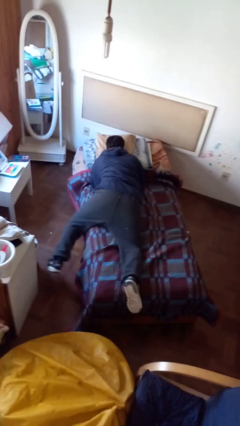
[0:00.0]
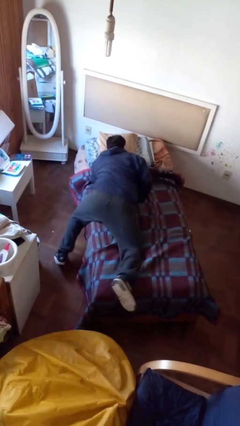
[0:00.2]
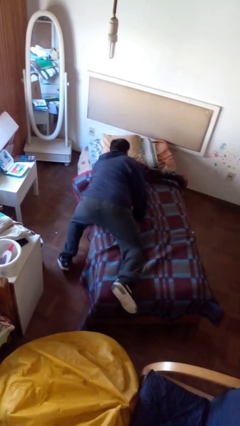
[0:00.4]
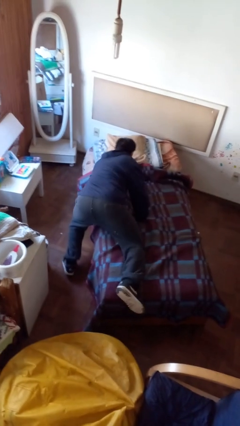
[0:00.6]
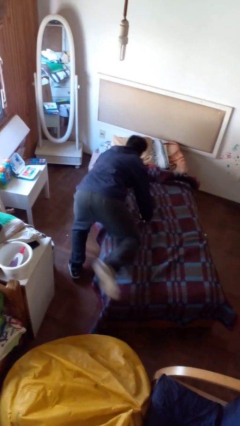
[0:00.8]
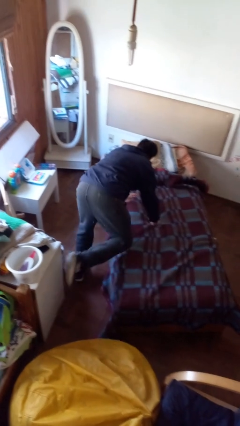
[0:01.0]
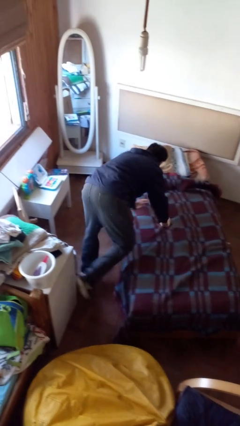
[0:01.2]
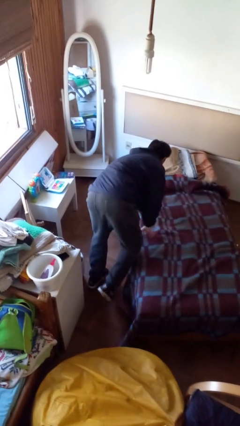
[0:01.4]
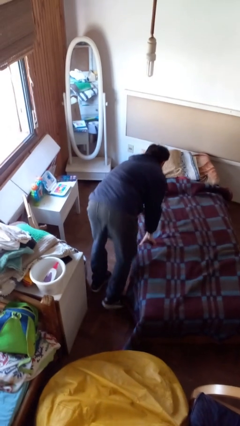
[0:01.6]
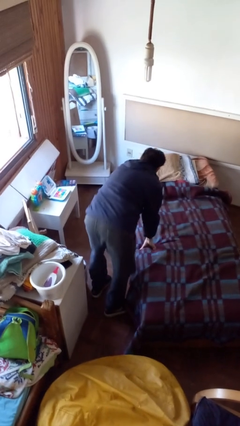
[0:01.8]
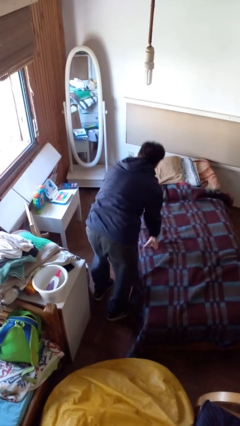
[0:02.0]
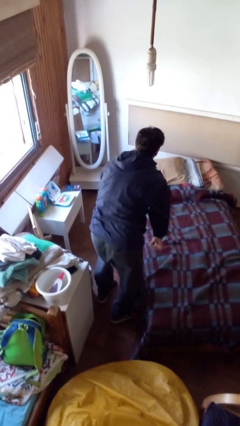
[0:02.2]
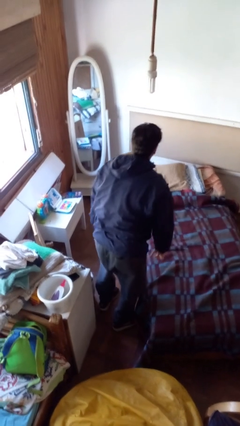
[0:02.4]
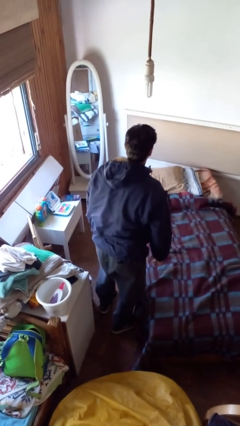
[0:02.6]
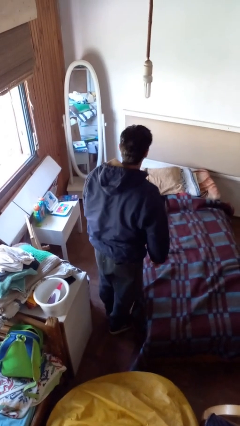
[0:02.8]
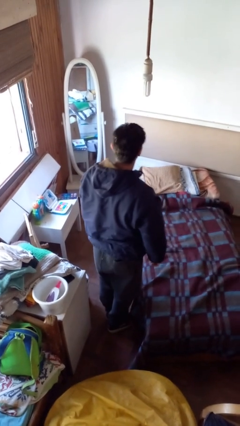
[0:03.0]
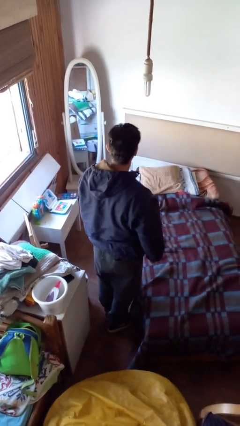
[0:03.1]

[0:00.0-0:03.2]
person stands up

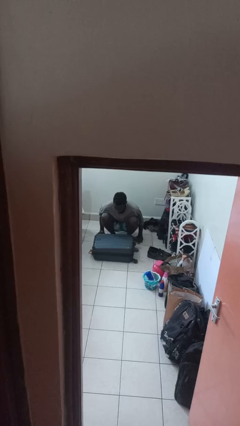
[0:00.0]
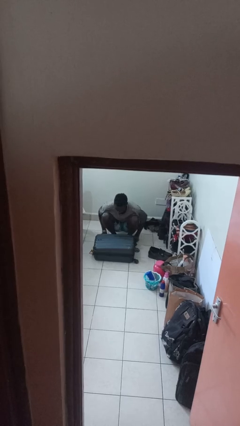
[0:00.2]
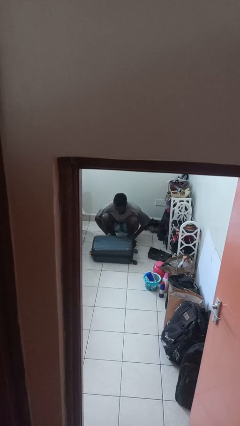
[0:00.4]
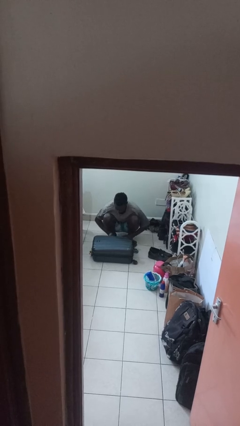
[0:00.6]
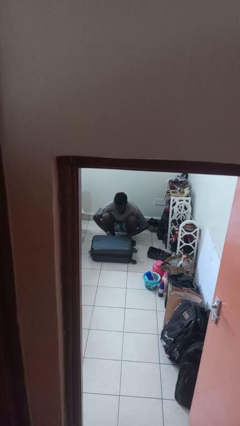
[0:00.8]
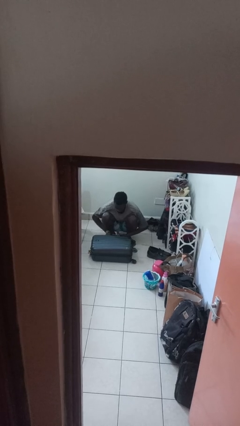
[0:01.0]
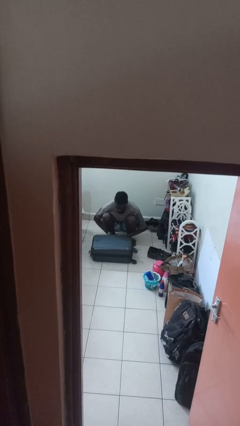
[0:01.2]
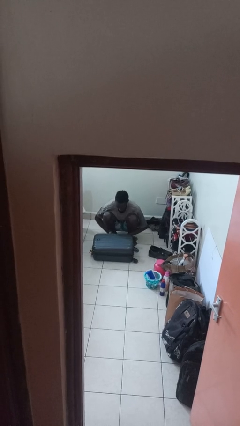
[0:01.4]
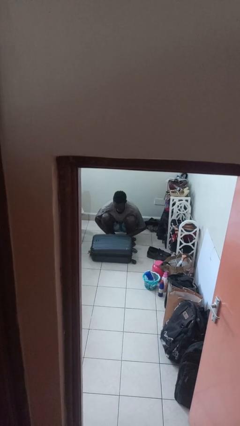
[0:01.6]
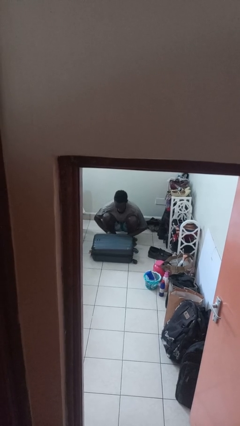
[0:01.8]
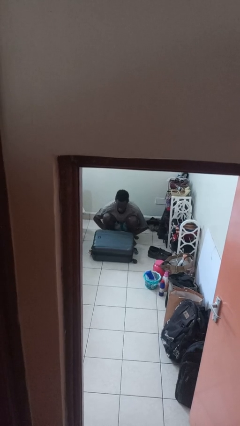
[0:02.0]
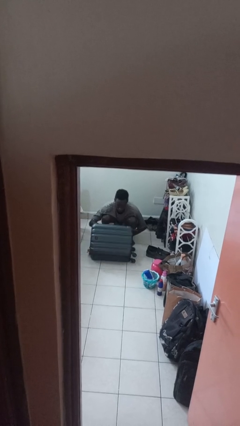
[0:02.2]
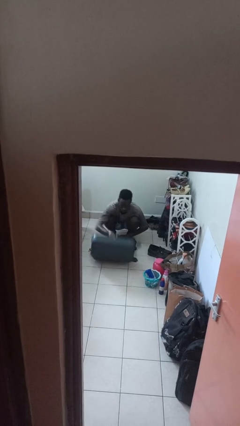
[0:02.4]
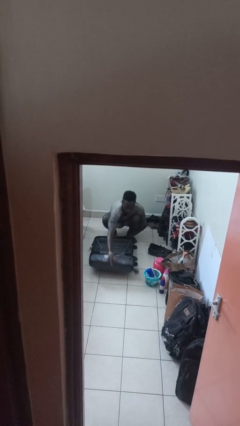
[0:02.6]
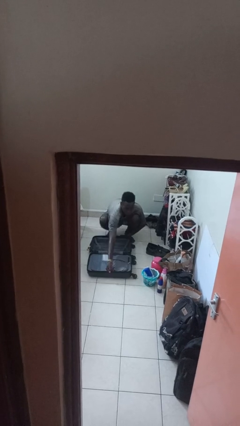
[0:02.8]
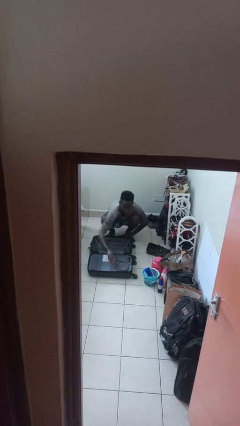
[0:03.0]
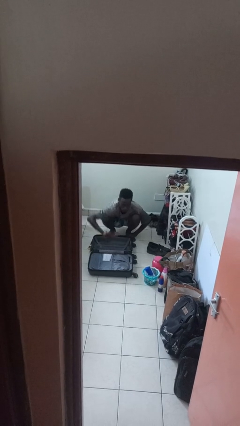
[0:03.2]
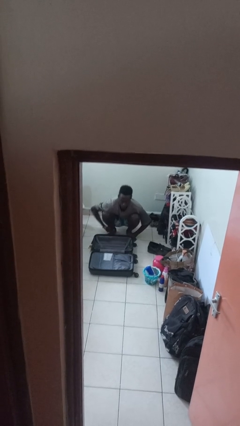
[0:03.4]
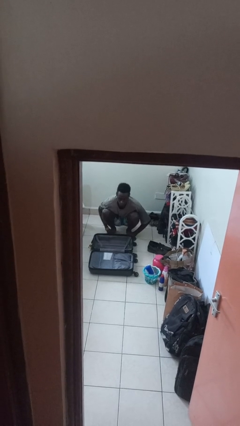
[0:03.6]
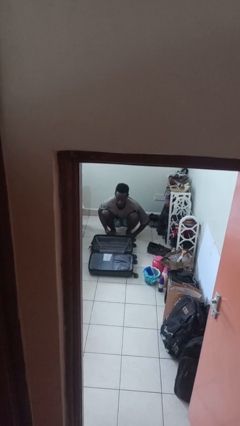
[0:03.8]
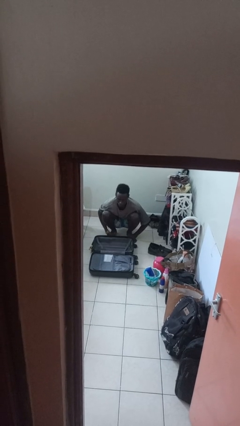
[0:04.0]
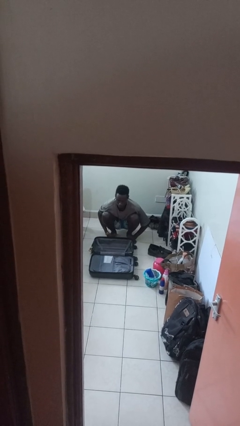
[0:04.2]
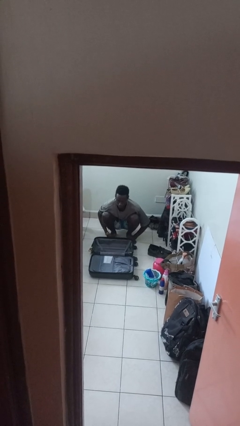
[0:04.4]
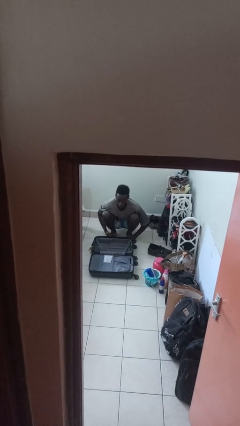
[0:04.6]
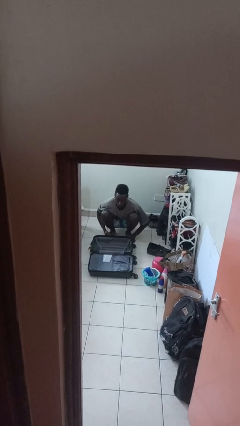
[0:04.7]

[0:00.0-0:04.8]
person opens suitcase

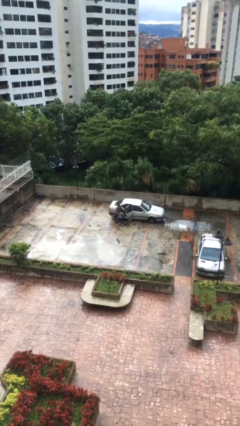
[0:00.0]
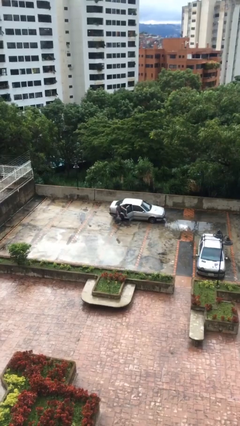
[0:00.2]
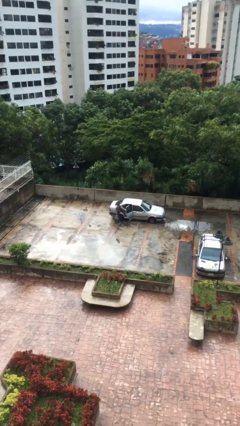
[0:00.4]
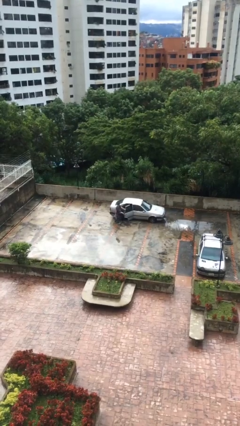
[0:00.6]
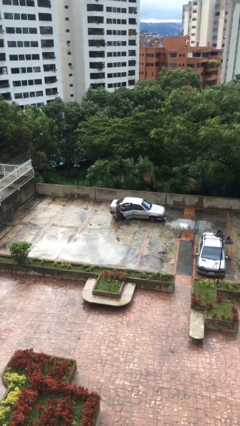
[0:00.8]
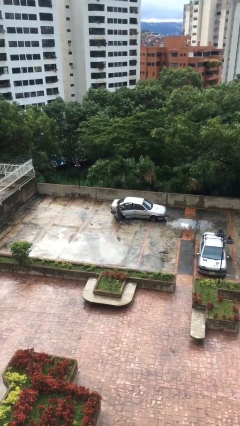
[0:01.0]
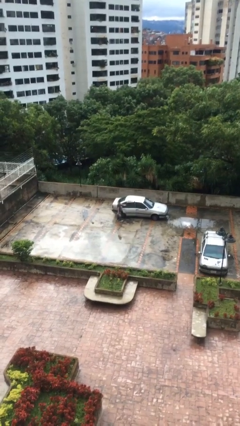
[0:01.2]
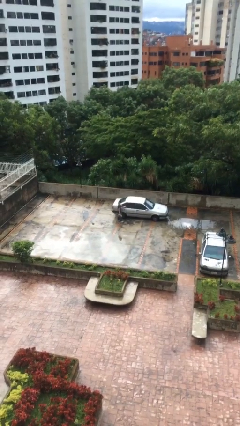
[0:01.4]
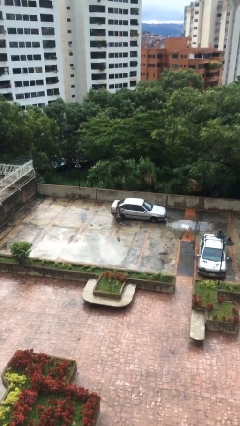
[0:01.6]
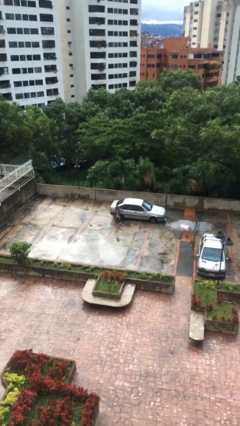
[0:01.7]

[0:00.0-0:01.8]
person closes car door

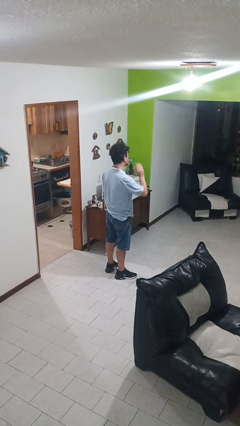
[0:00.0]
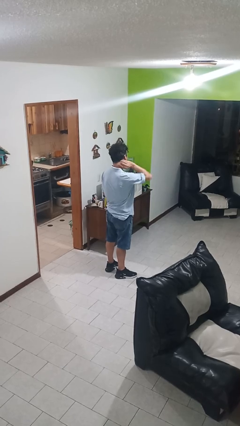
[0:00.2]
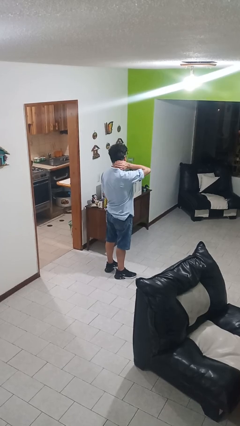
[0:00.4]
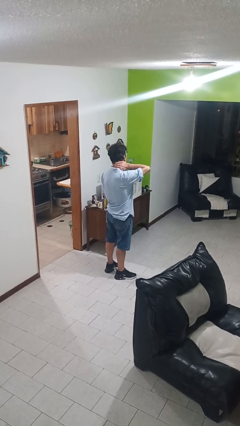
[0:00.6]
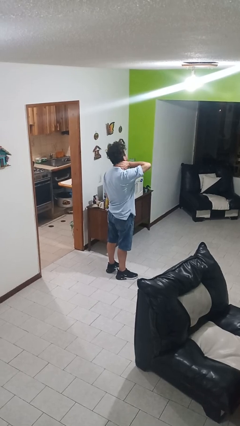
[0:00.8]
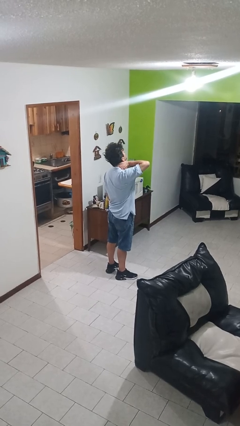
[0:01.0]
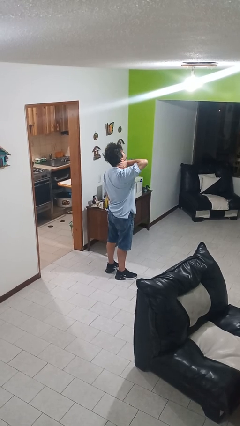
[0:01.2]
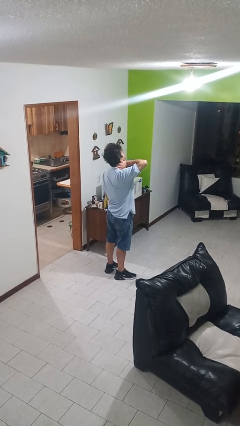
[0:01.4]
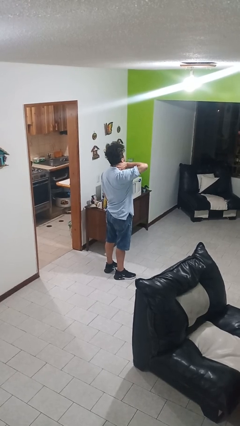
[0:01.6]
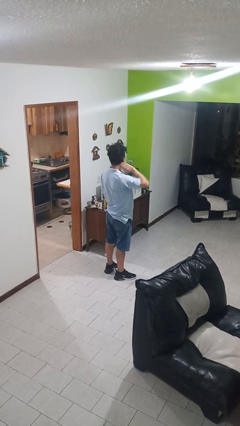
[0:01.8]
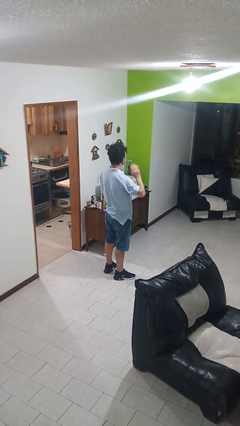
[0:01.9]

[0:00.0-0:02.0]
person rubs neck

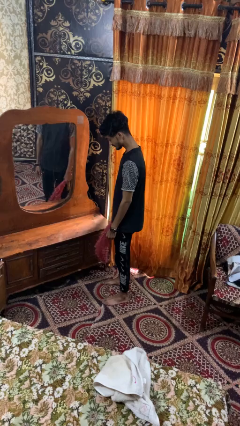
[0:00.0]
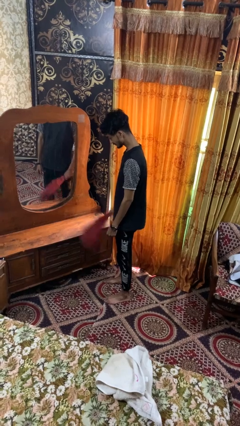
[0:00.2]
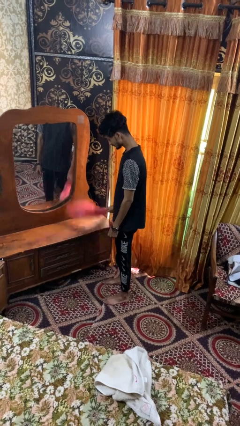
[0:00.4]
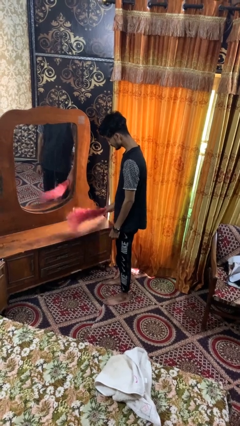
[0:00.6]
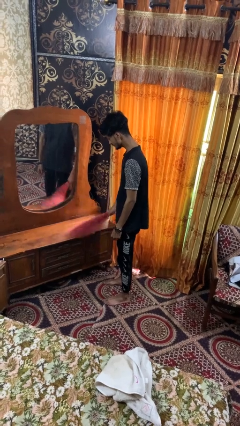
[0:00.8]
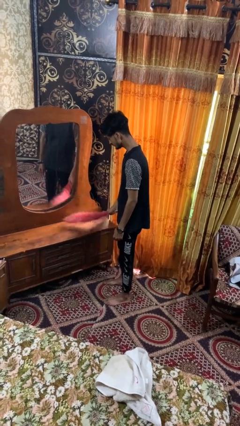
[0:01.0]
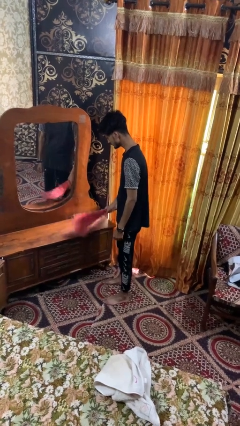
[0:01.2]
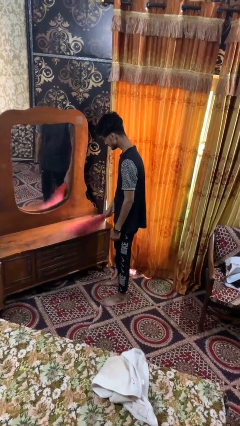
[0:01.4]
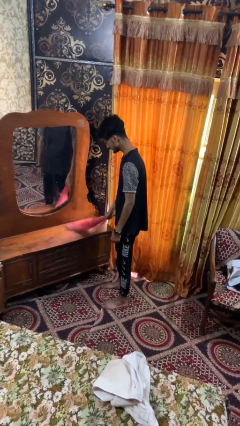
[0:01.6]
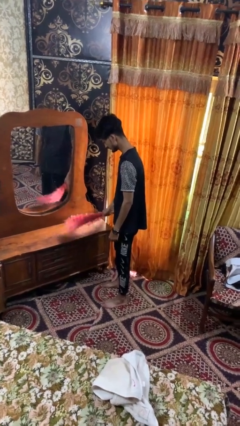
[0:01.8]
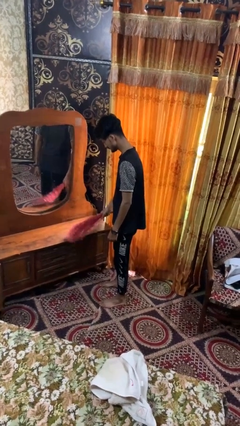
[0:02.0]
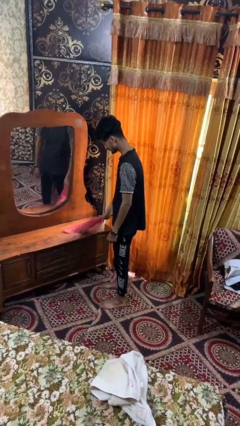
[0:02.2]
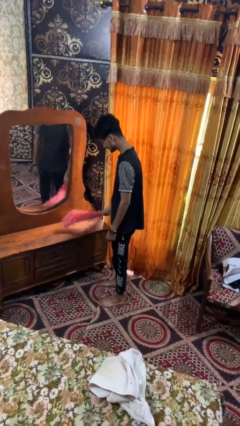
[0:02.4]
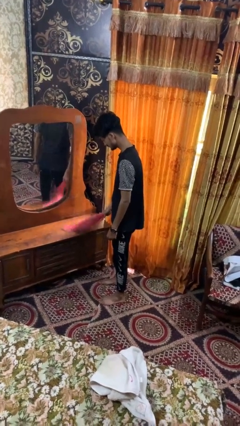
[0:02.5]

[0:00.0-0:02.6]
person dusts furniture

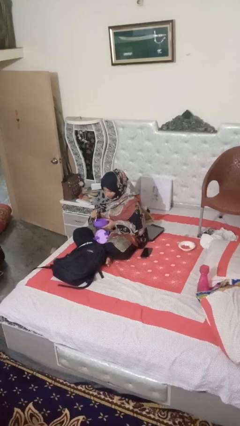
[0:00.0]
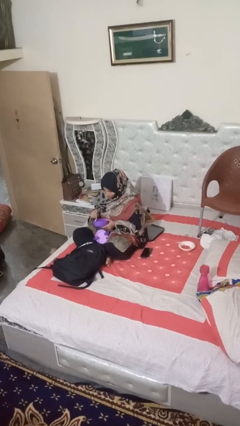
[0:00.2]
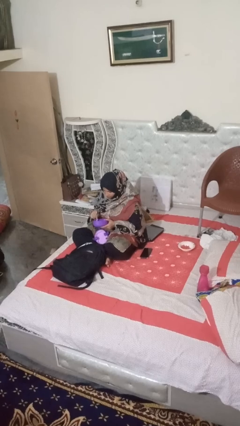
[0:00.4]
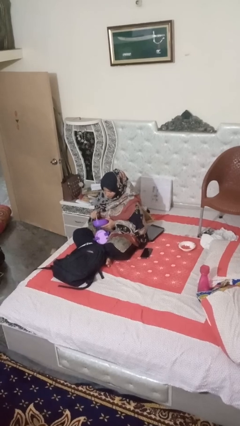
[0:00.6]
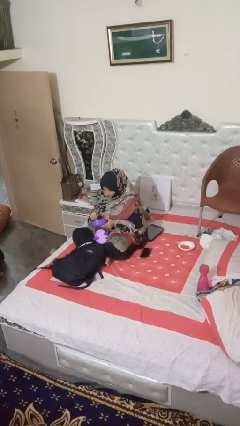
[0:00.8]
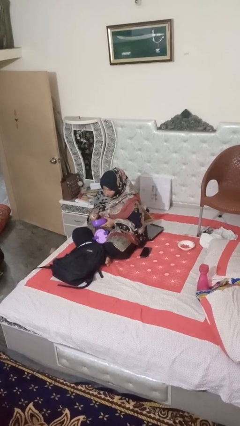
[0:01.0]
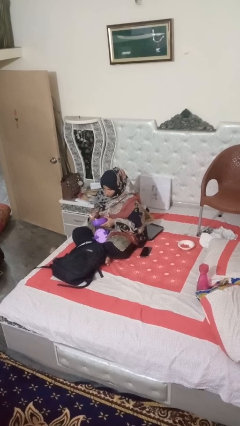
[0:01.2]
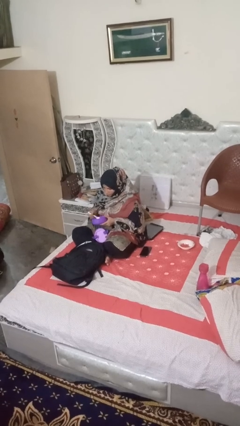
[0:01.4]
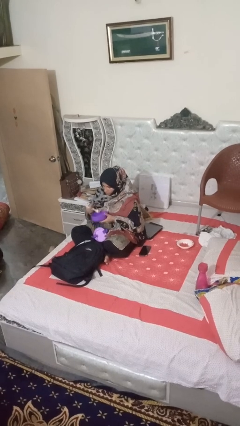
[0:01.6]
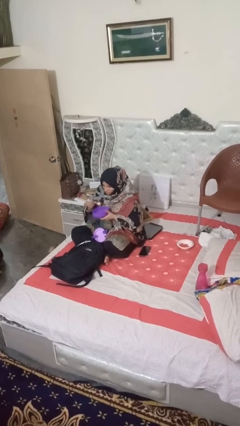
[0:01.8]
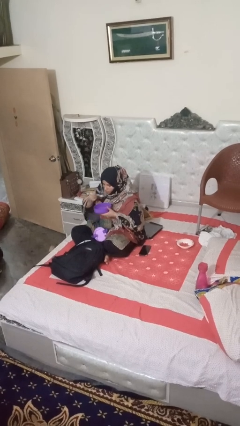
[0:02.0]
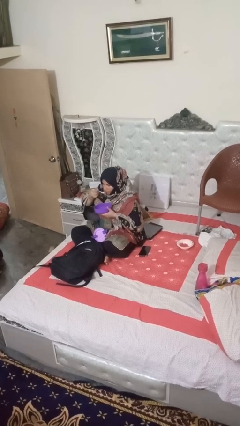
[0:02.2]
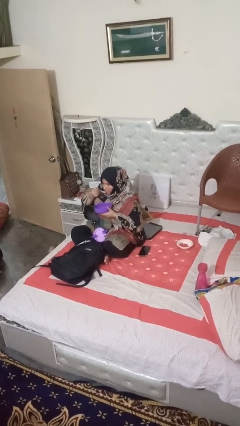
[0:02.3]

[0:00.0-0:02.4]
person eats snack from bag

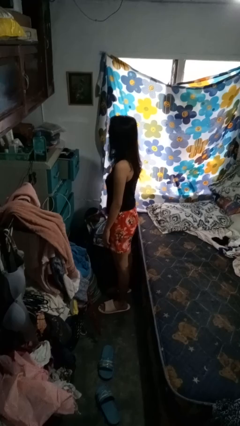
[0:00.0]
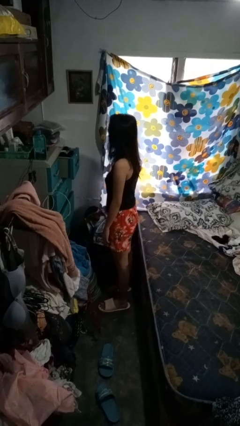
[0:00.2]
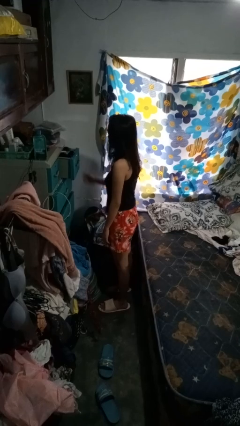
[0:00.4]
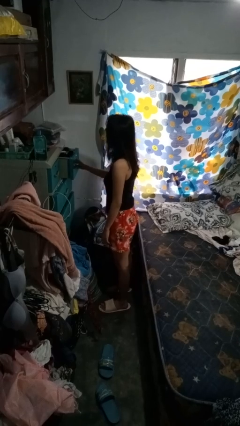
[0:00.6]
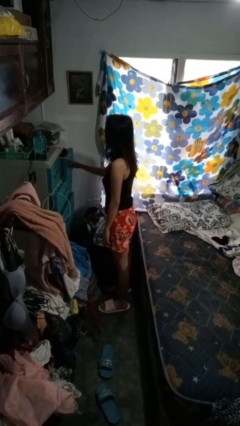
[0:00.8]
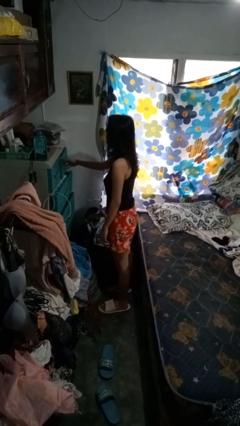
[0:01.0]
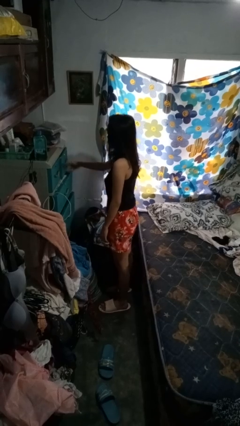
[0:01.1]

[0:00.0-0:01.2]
person closes dresser drawer
